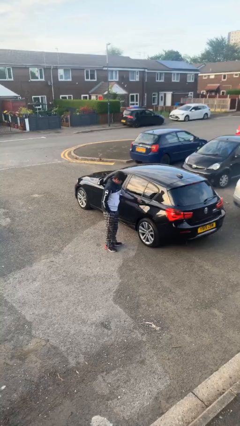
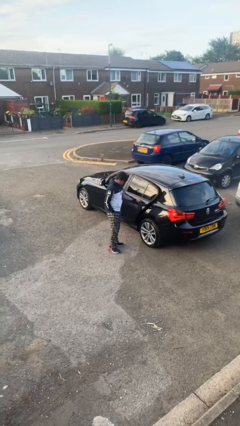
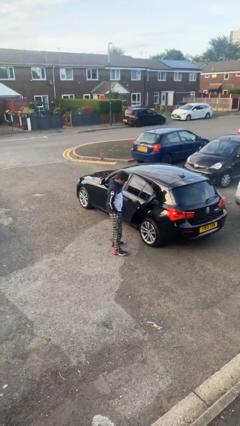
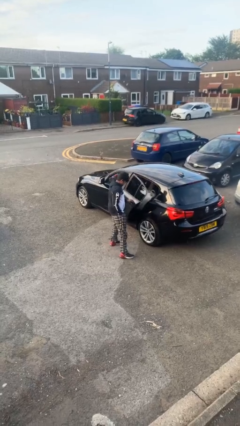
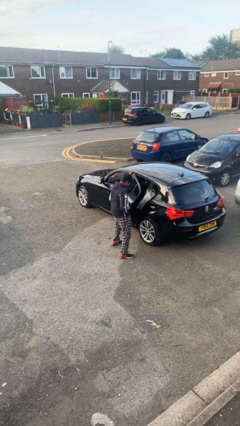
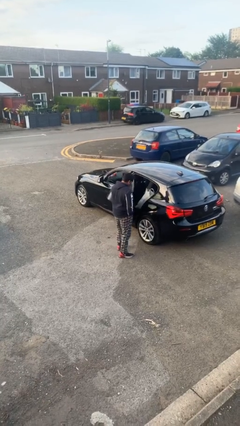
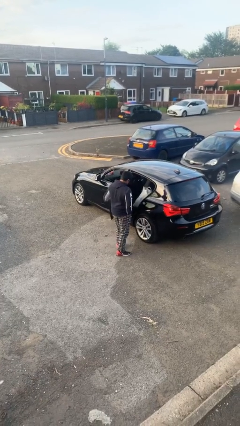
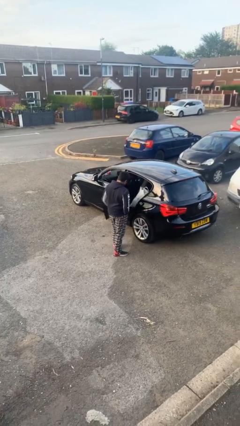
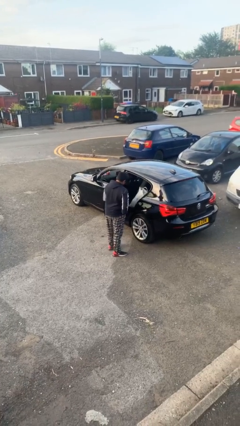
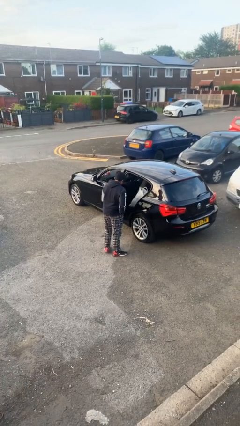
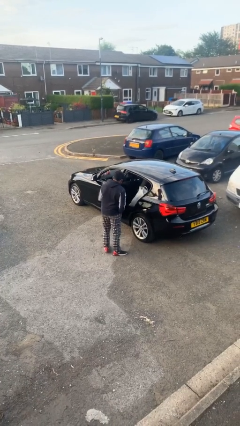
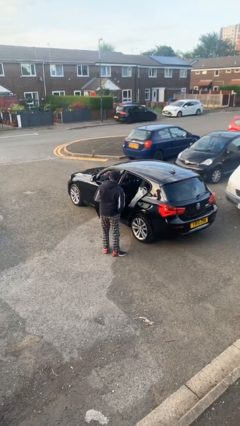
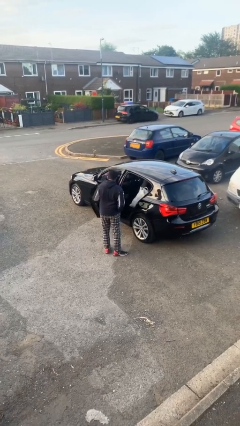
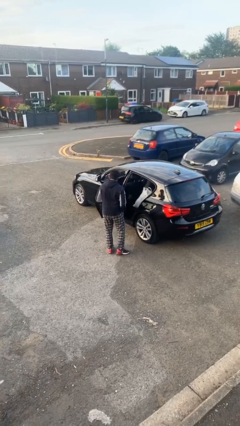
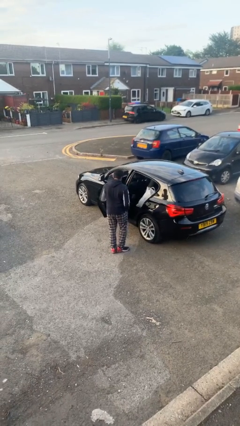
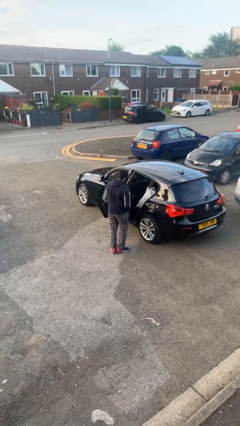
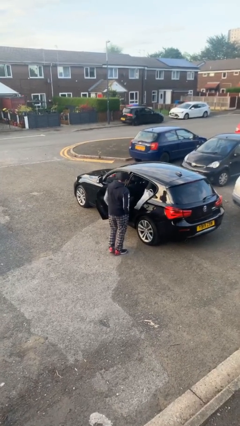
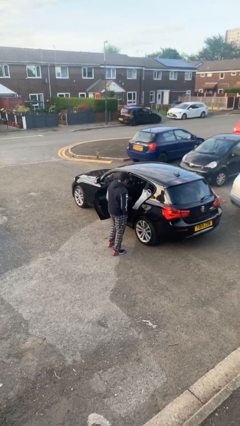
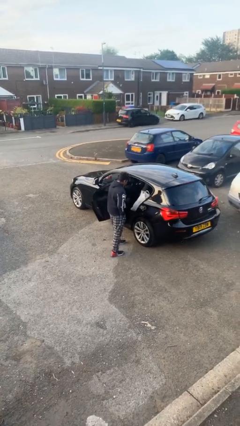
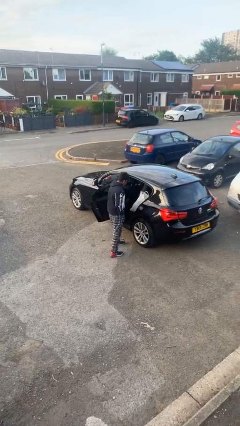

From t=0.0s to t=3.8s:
person opens car door

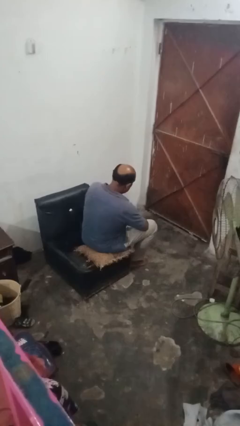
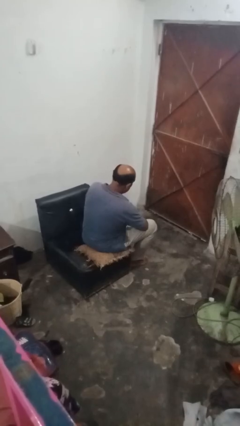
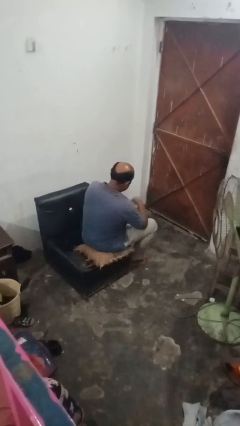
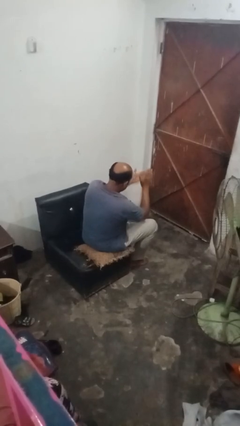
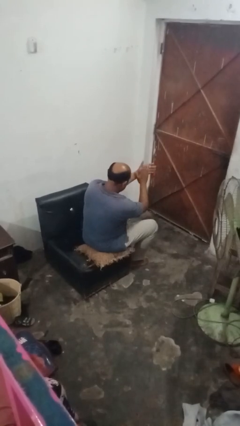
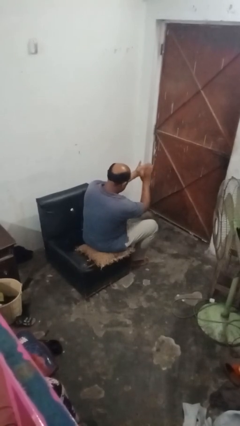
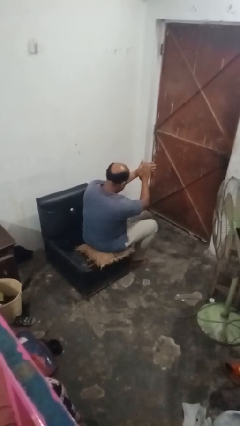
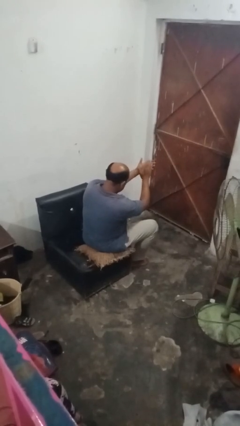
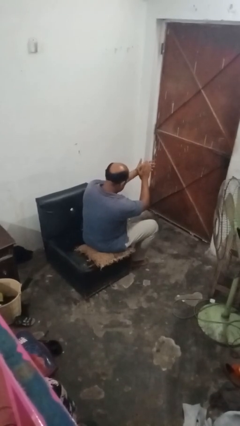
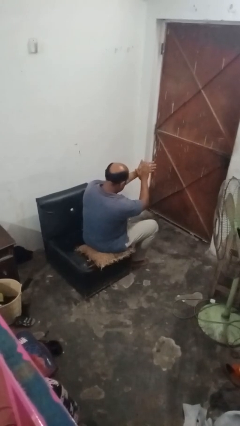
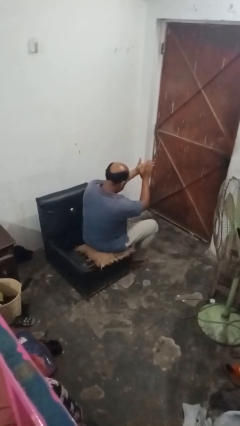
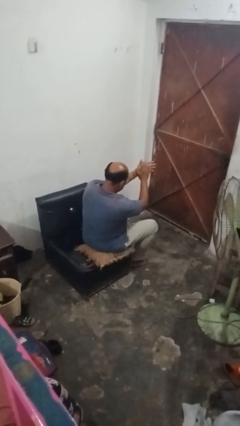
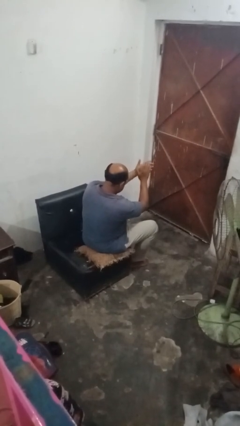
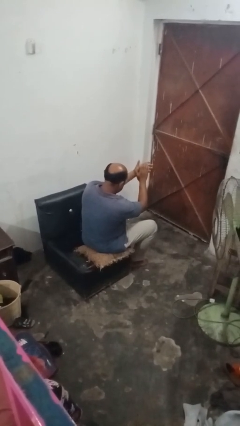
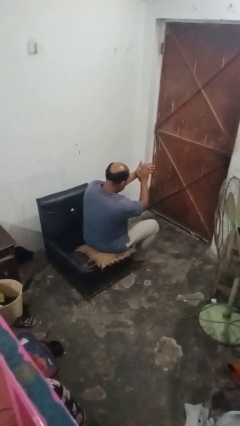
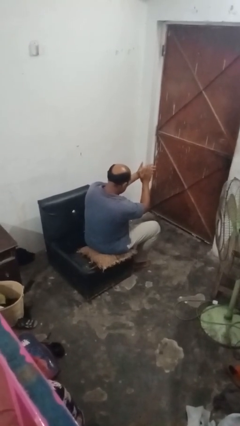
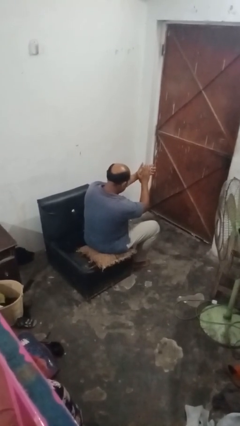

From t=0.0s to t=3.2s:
person claps hands

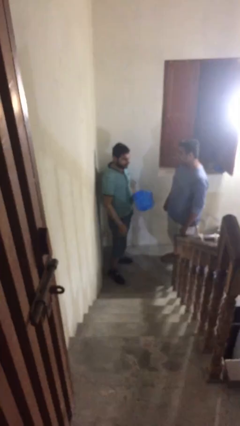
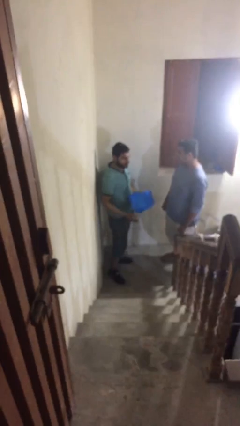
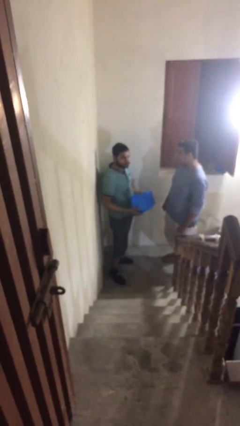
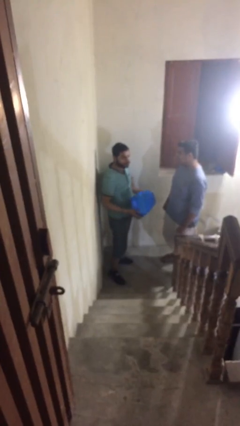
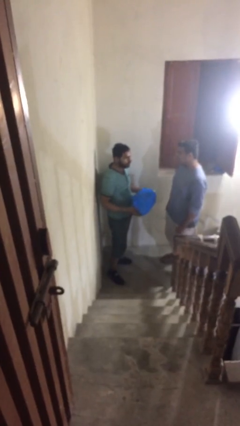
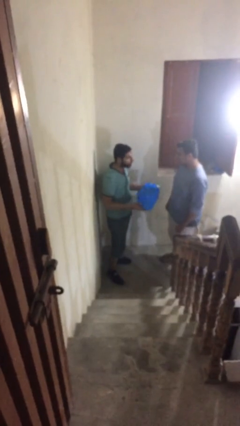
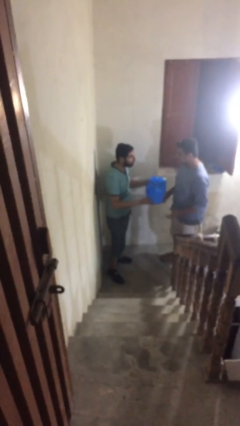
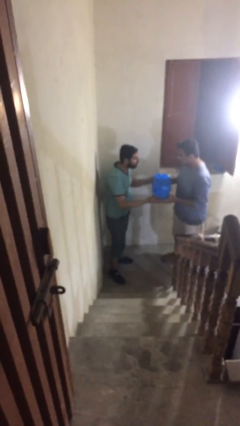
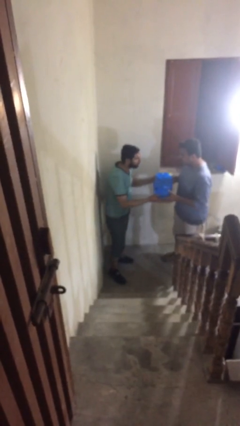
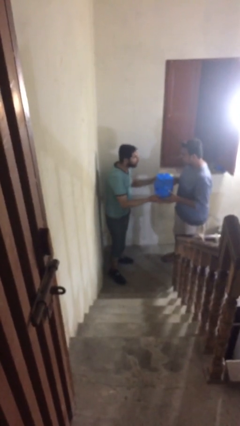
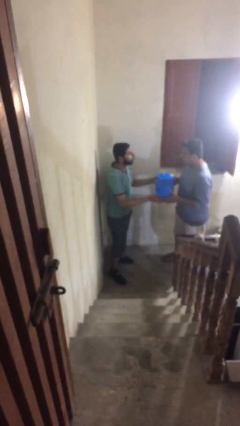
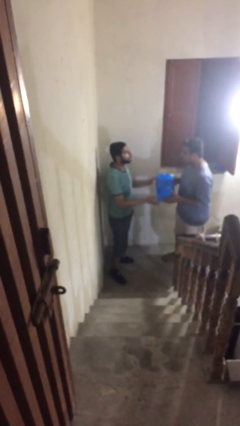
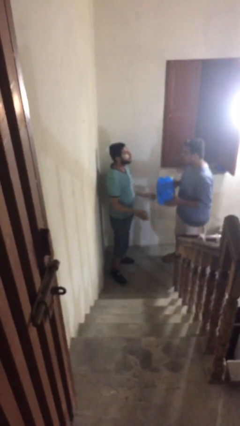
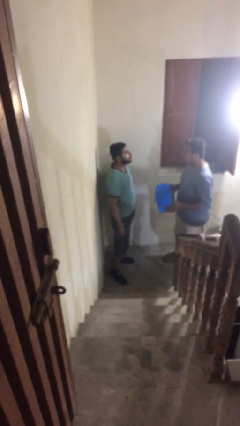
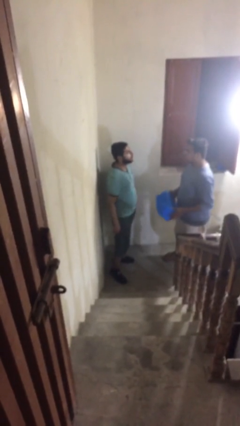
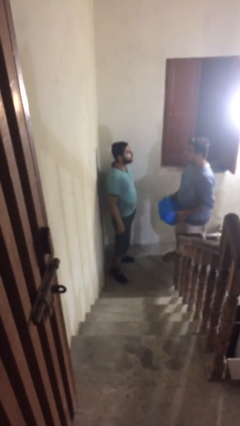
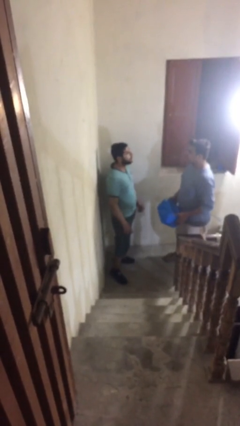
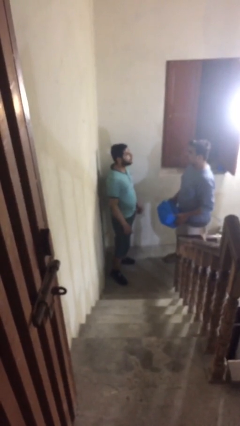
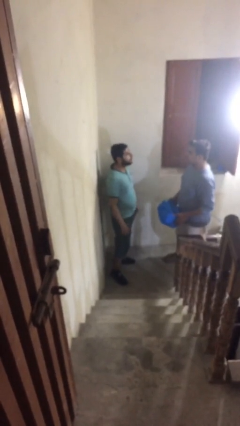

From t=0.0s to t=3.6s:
person transfers object to person

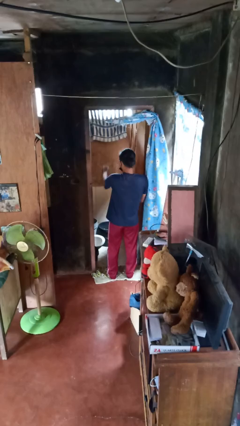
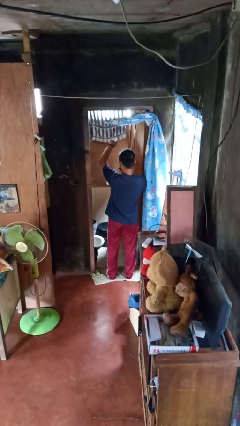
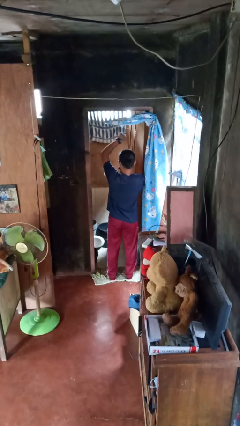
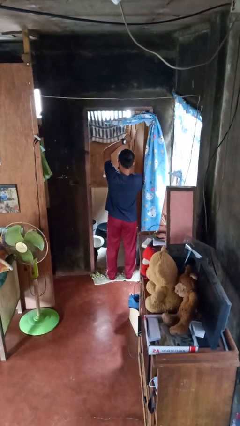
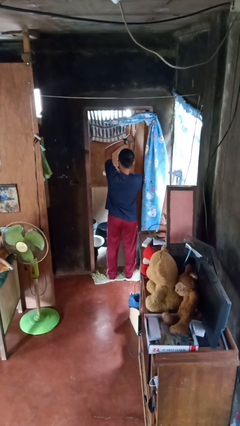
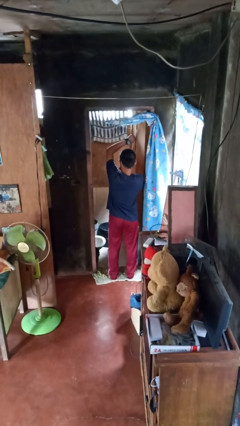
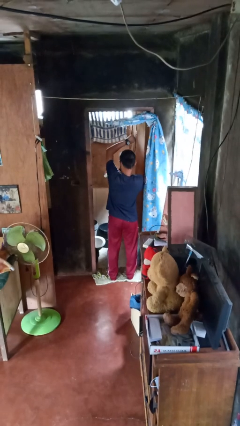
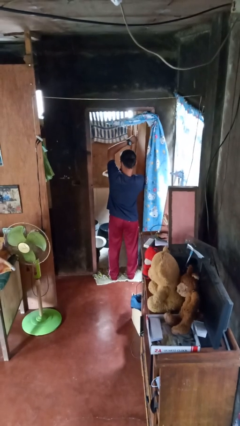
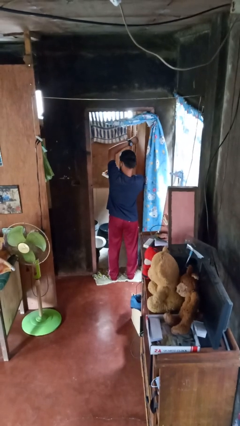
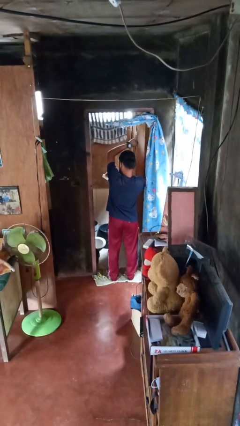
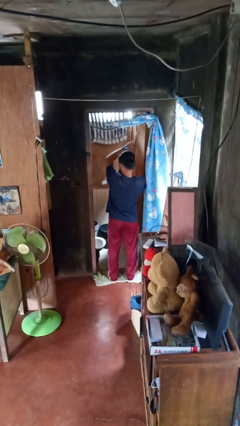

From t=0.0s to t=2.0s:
person applies deodorant

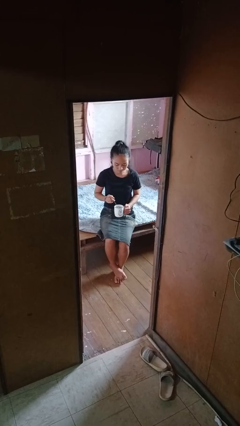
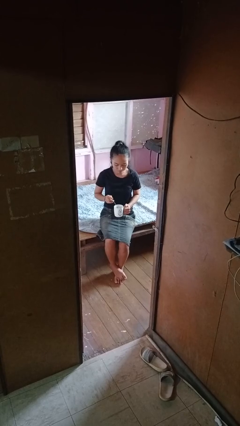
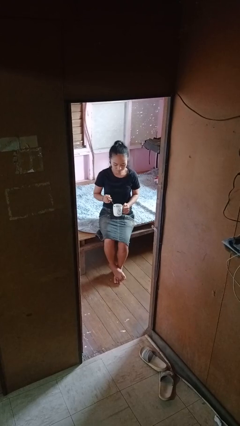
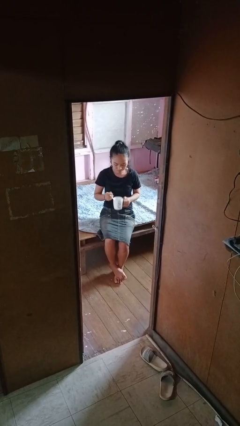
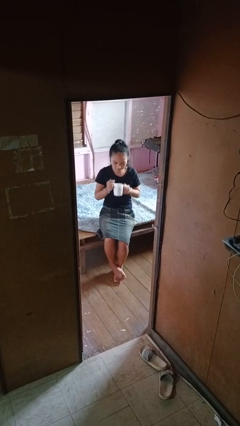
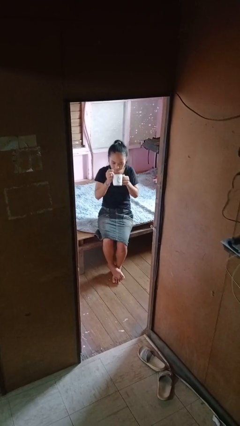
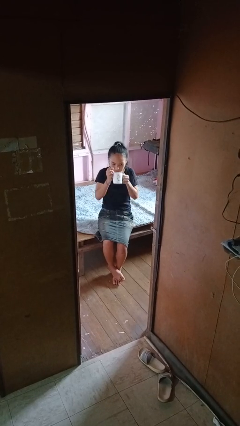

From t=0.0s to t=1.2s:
person stirs mug

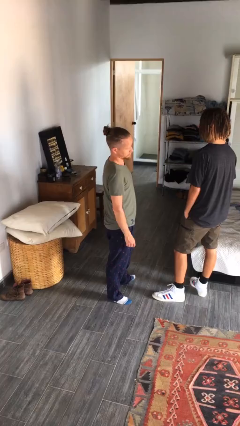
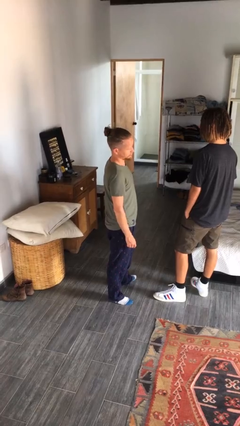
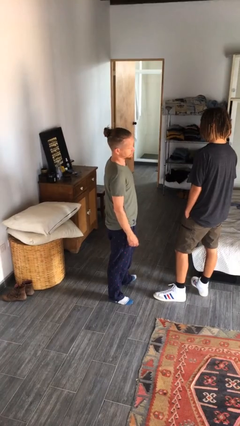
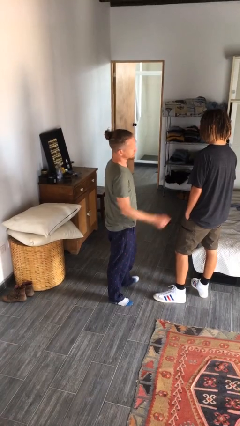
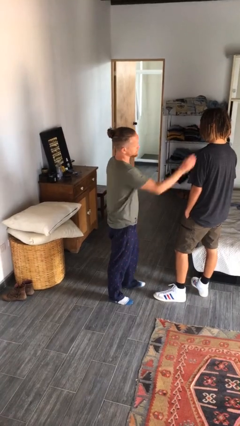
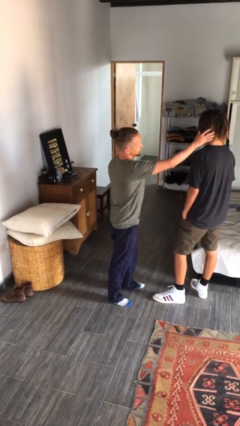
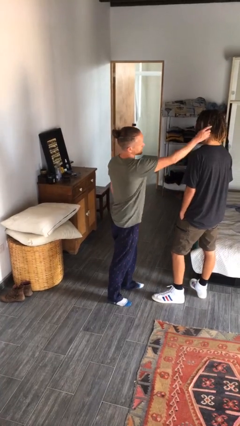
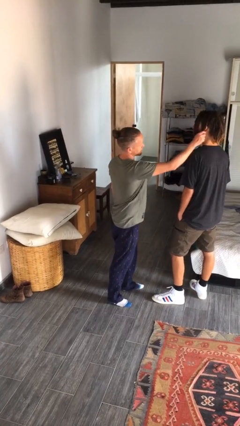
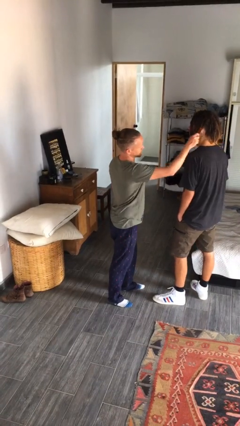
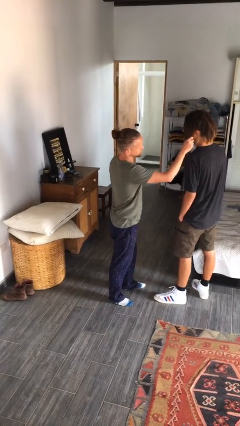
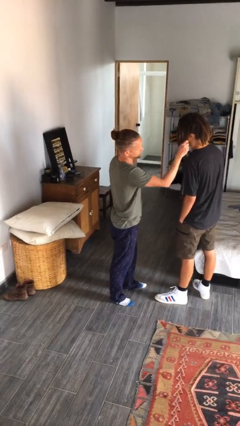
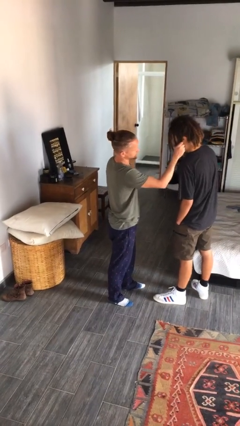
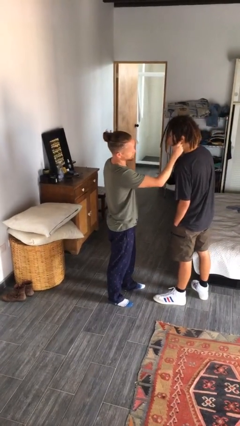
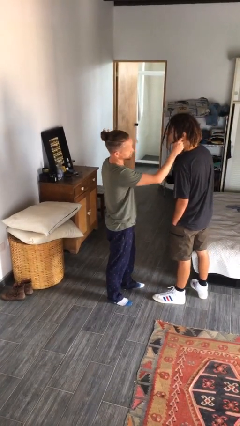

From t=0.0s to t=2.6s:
person grabs person by hair

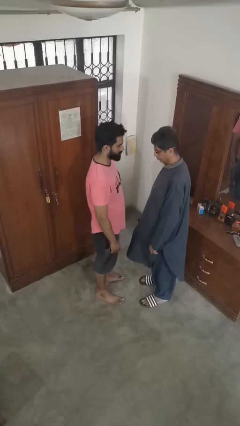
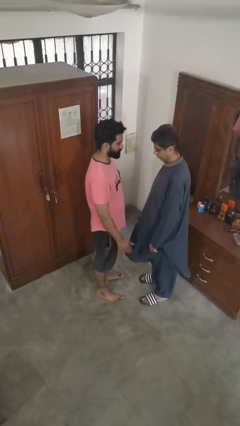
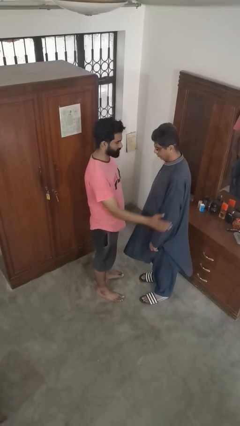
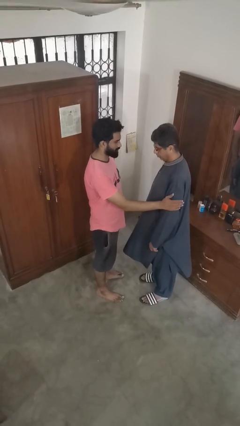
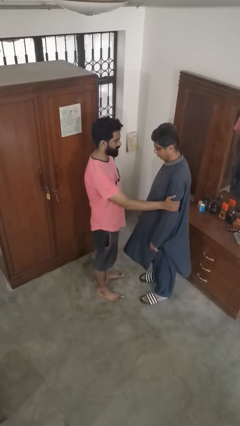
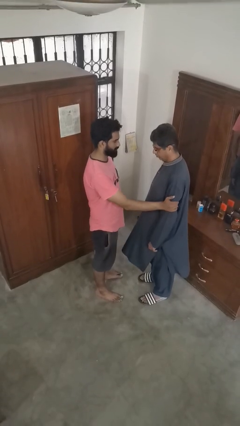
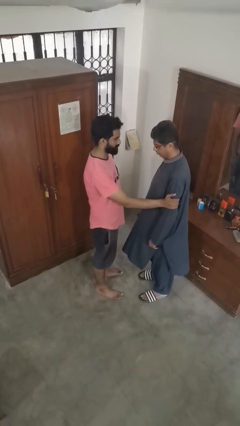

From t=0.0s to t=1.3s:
person grabs person by bicep
